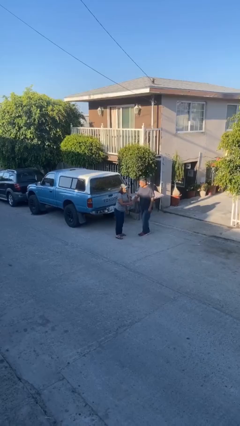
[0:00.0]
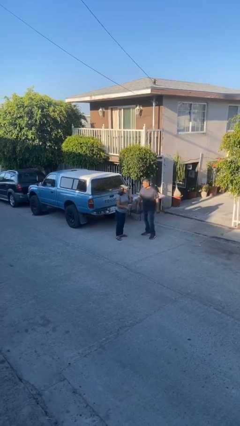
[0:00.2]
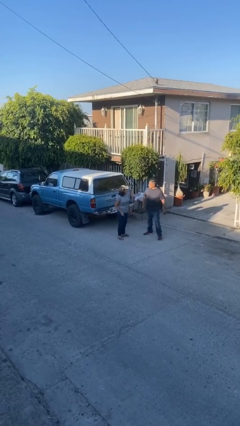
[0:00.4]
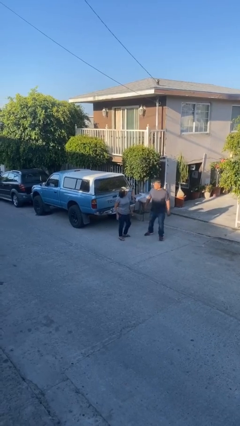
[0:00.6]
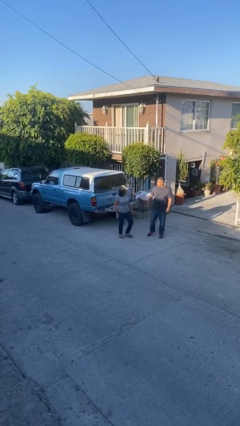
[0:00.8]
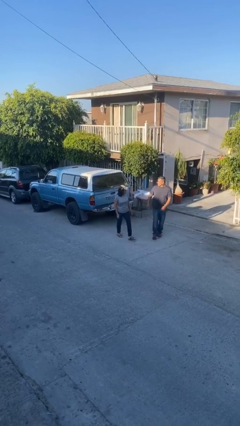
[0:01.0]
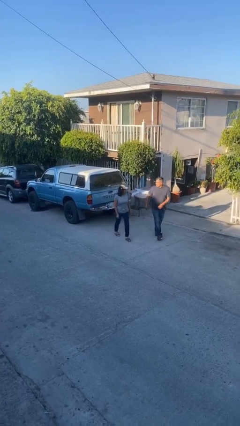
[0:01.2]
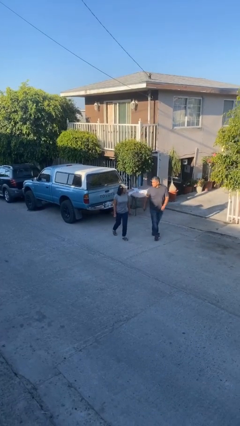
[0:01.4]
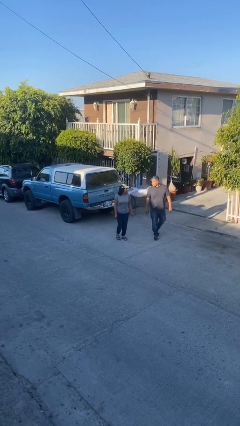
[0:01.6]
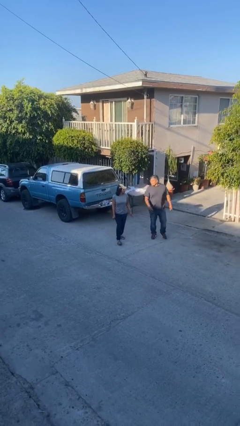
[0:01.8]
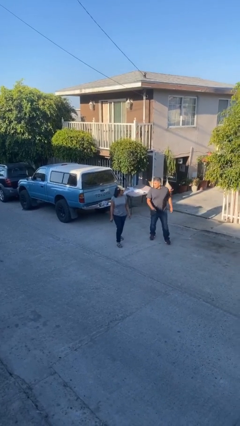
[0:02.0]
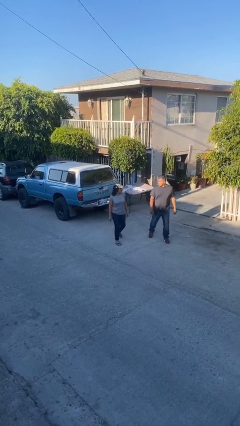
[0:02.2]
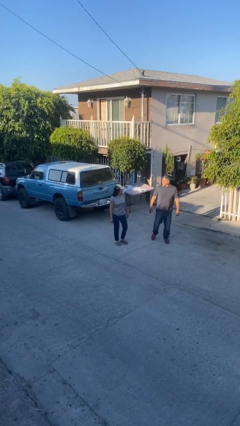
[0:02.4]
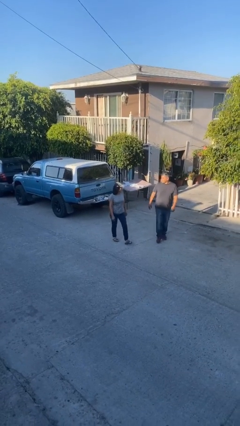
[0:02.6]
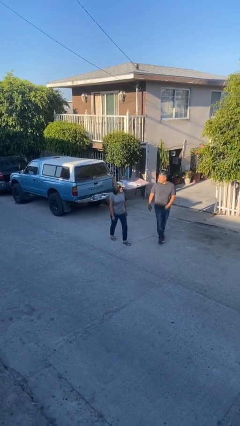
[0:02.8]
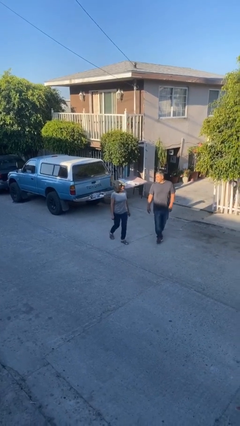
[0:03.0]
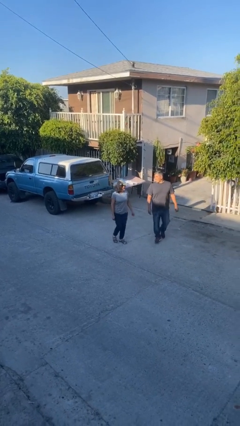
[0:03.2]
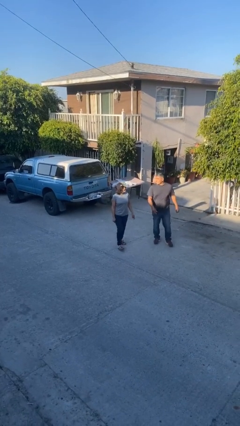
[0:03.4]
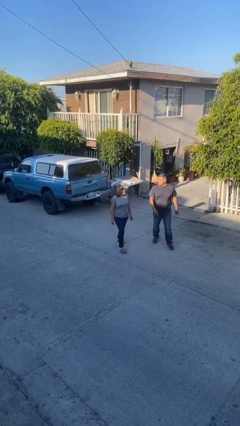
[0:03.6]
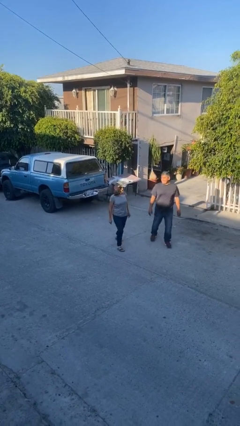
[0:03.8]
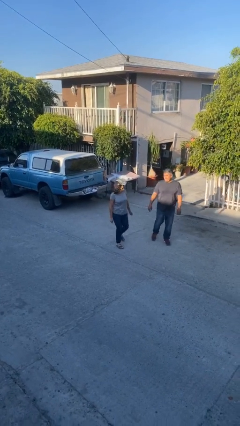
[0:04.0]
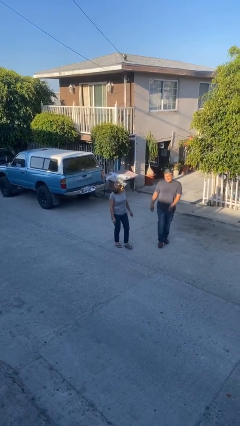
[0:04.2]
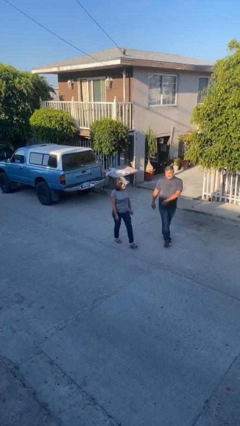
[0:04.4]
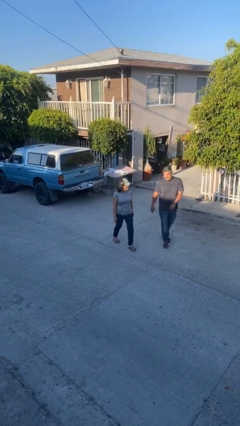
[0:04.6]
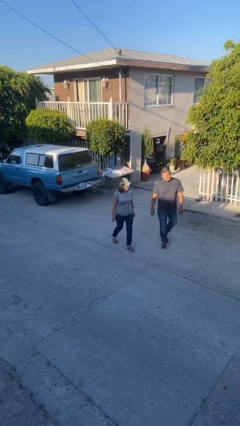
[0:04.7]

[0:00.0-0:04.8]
person talks to person

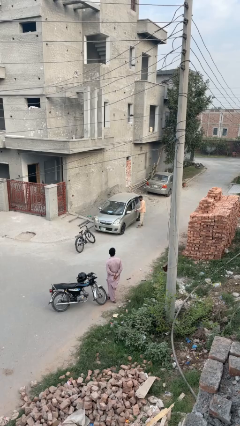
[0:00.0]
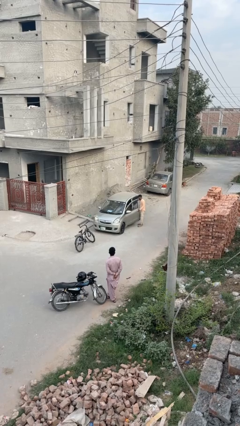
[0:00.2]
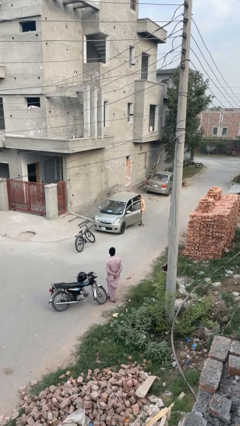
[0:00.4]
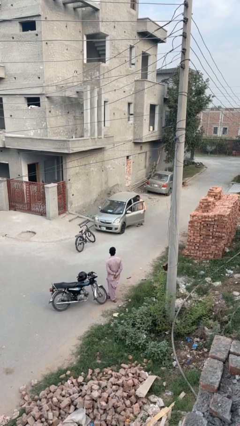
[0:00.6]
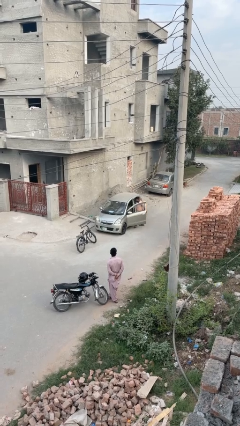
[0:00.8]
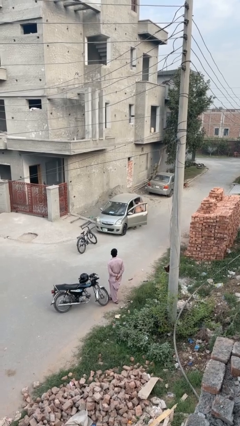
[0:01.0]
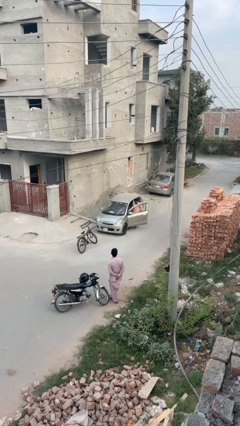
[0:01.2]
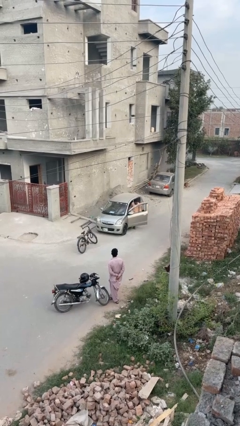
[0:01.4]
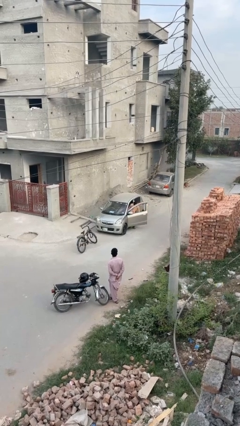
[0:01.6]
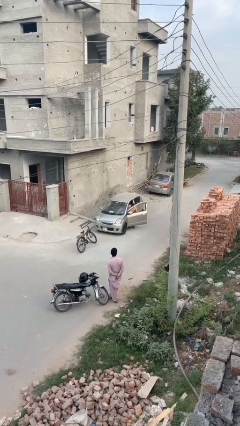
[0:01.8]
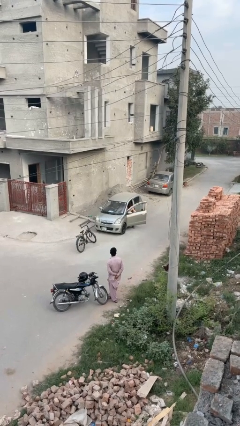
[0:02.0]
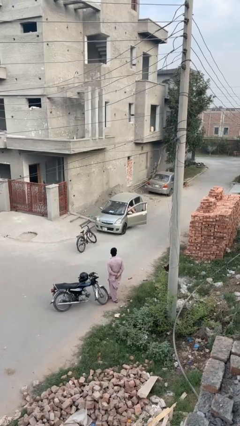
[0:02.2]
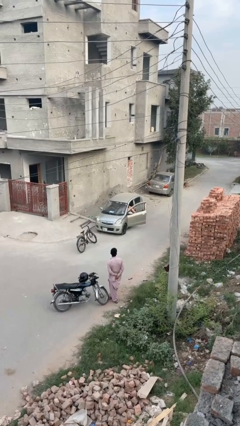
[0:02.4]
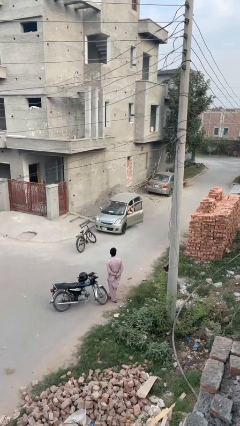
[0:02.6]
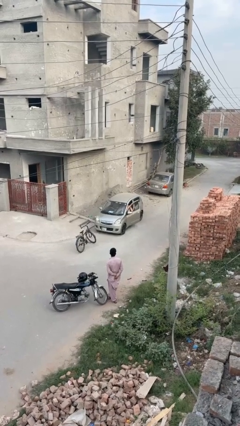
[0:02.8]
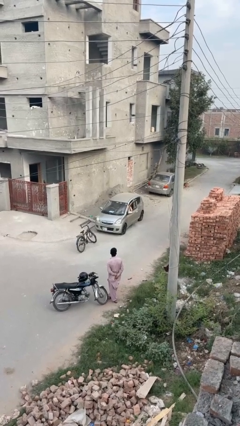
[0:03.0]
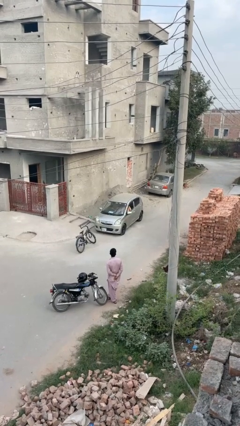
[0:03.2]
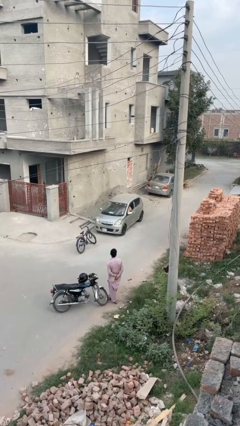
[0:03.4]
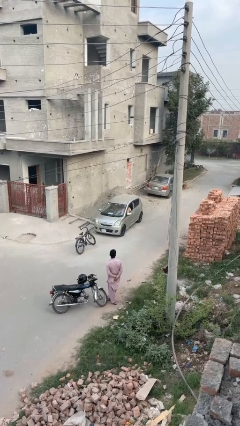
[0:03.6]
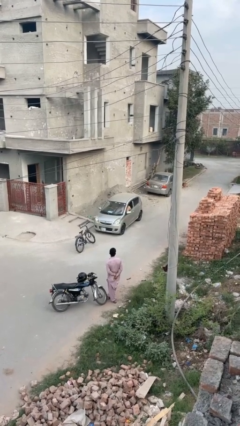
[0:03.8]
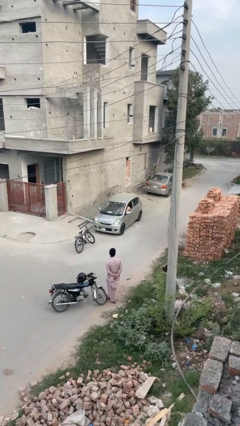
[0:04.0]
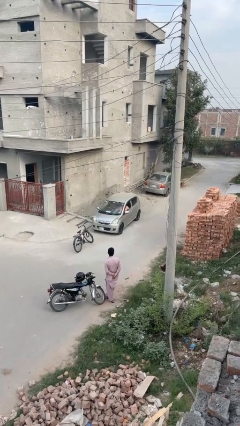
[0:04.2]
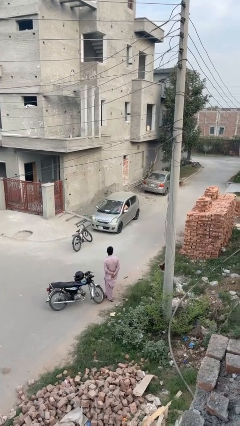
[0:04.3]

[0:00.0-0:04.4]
car picks up person

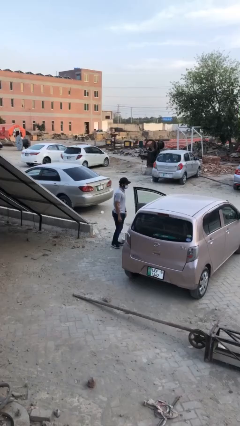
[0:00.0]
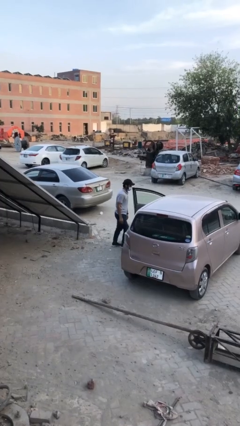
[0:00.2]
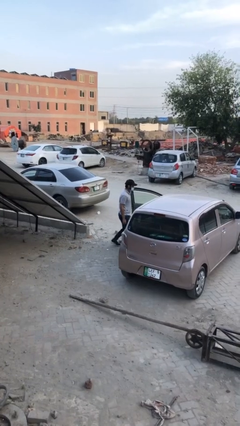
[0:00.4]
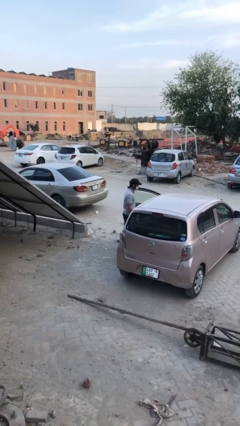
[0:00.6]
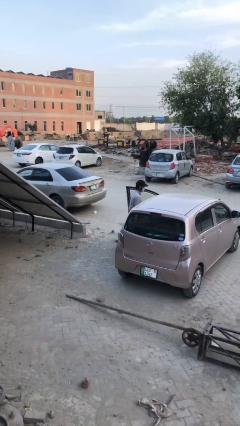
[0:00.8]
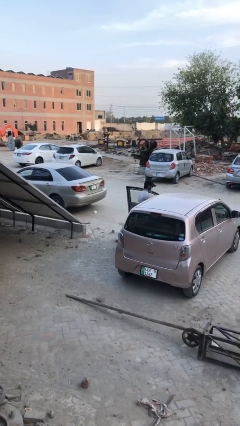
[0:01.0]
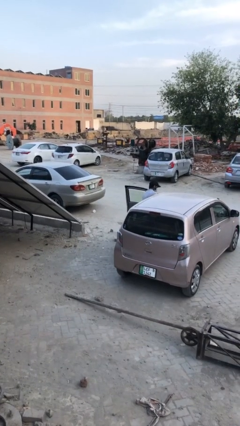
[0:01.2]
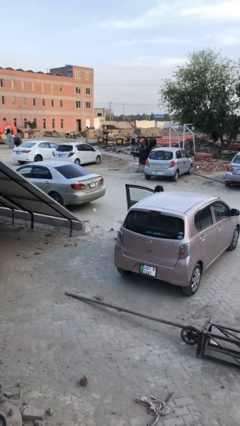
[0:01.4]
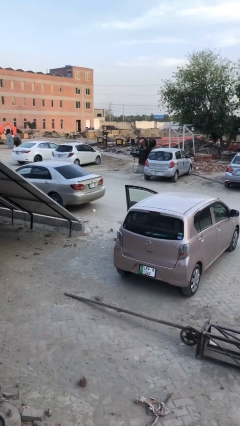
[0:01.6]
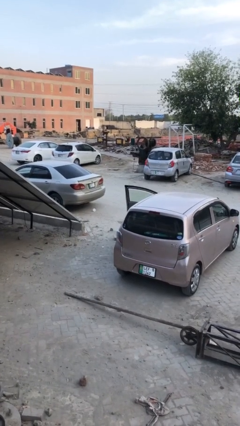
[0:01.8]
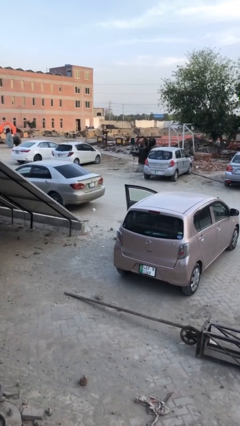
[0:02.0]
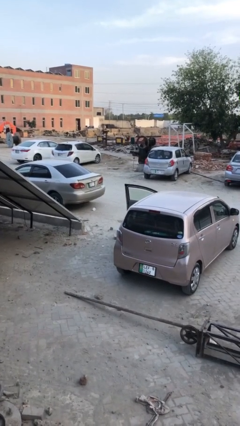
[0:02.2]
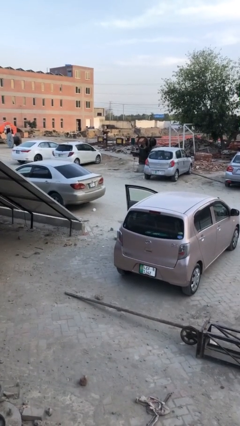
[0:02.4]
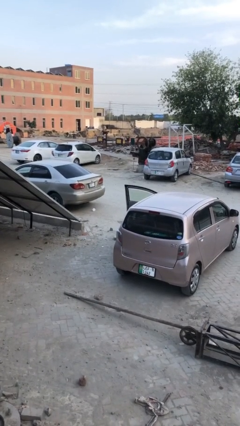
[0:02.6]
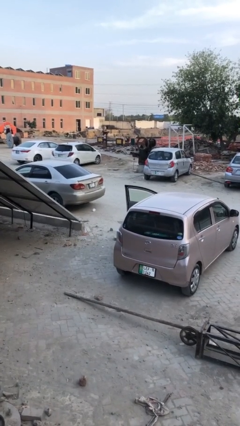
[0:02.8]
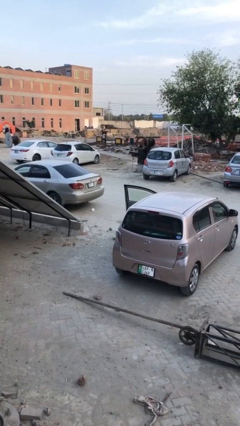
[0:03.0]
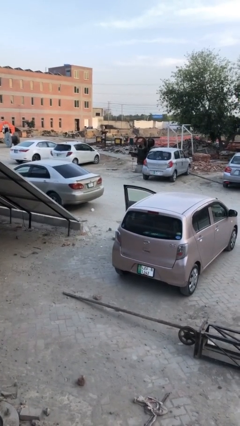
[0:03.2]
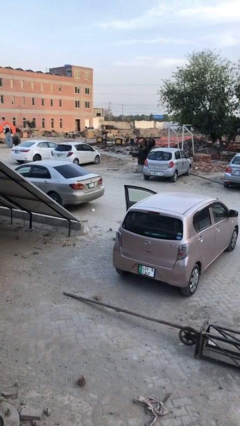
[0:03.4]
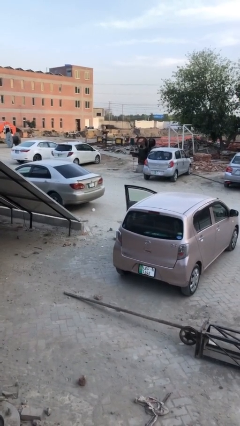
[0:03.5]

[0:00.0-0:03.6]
person enters car

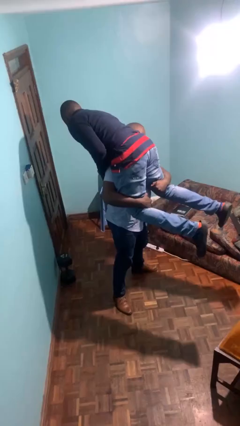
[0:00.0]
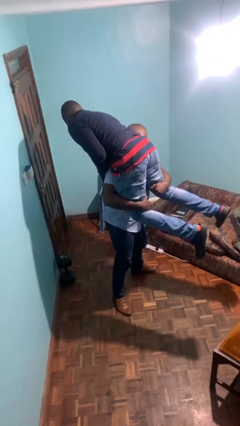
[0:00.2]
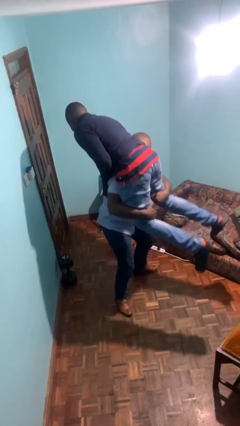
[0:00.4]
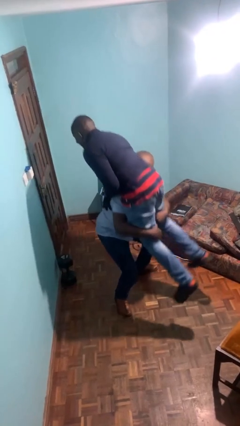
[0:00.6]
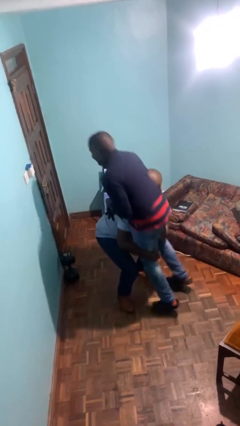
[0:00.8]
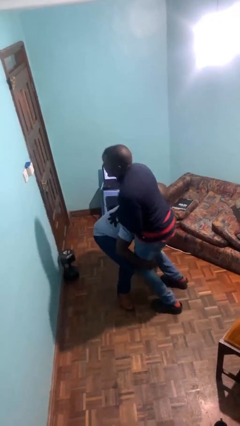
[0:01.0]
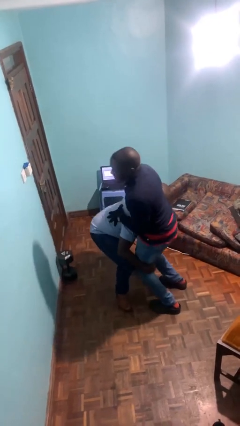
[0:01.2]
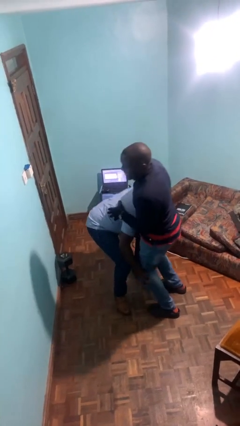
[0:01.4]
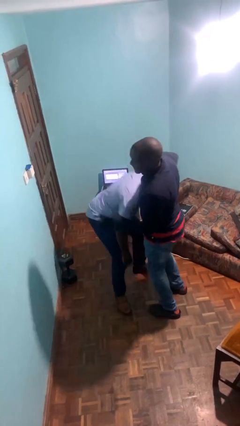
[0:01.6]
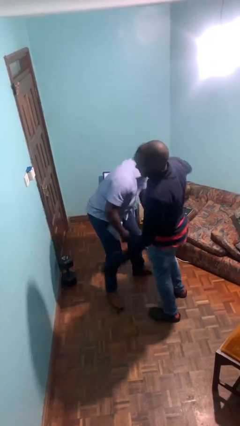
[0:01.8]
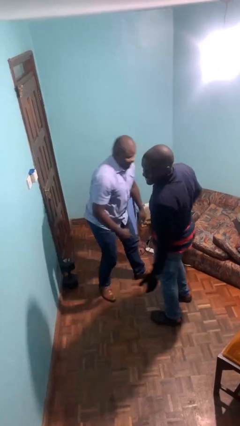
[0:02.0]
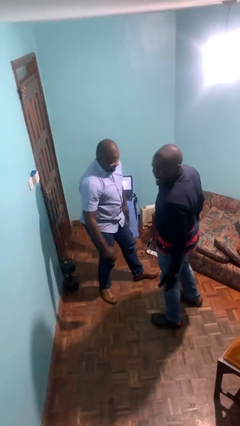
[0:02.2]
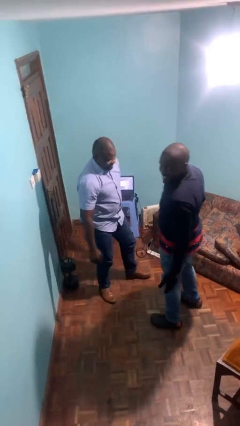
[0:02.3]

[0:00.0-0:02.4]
person puts down person

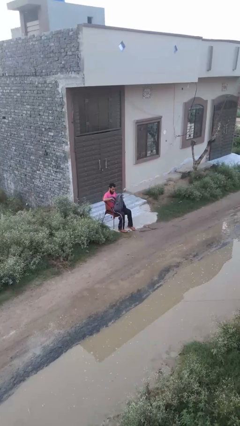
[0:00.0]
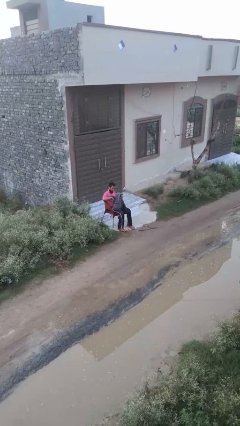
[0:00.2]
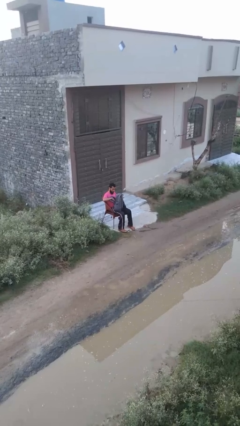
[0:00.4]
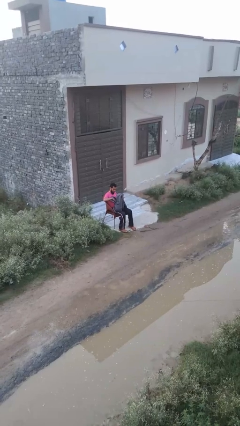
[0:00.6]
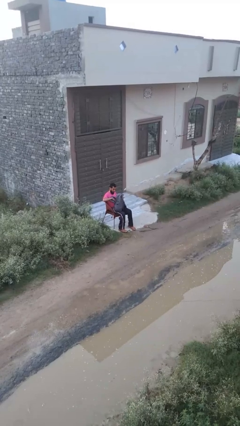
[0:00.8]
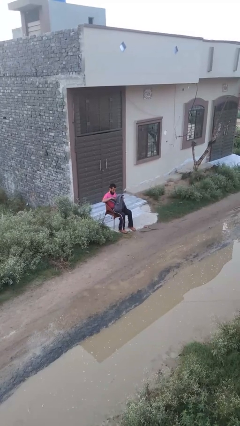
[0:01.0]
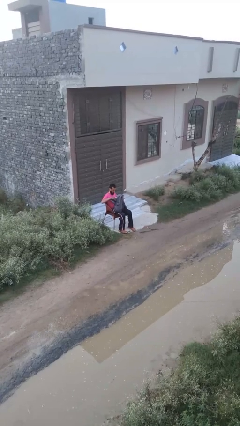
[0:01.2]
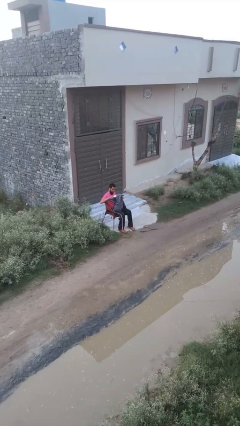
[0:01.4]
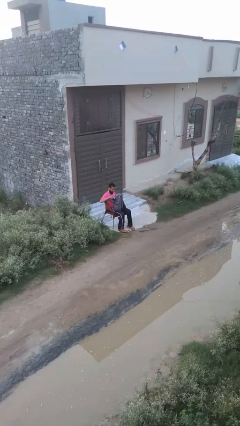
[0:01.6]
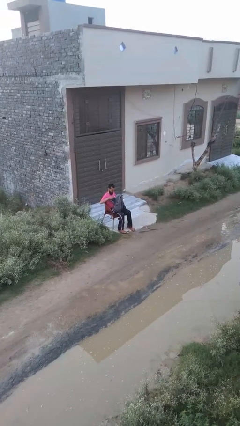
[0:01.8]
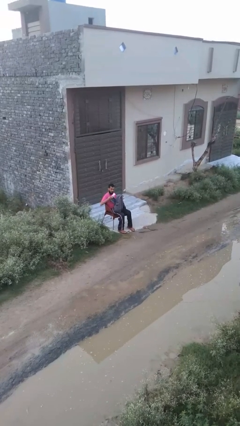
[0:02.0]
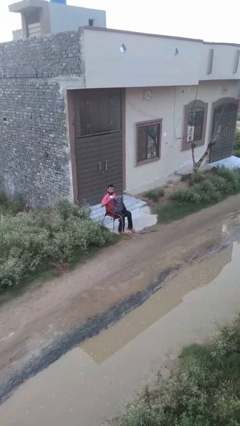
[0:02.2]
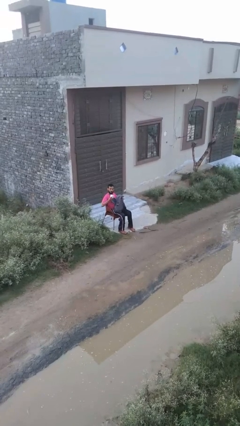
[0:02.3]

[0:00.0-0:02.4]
person takes object from backpack

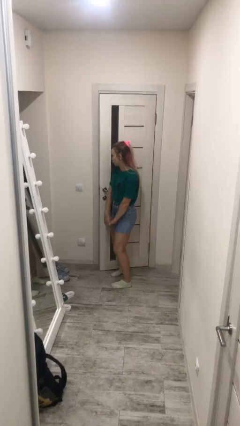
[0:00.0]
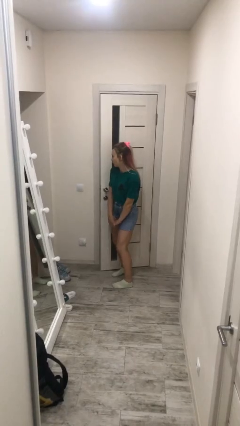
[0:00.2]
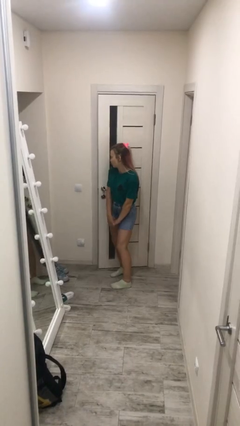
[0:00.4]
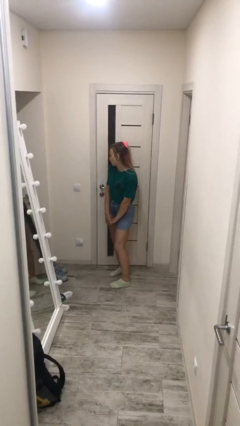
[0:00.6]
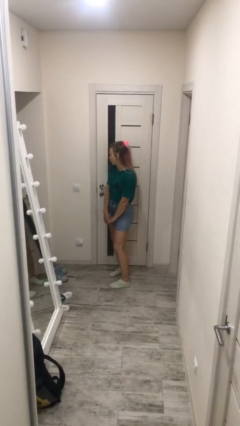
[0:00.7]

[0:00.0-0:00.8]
person closes door with hip
